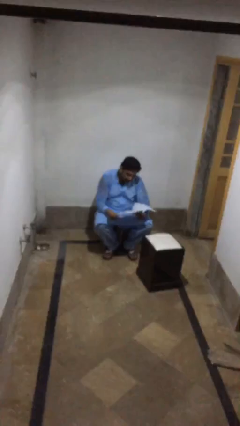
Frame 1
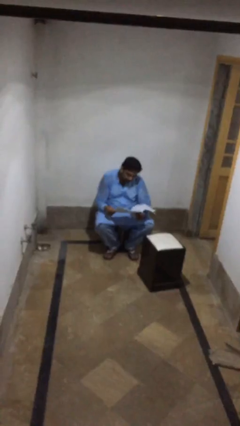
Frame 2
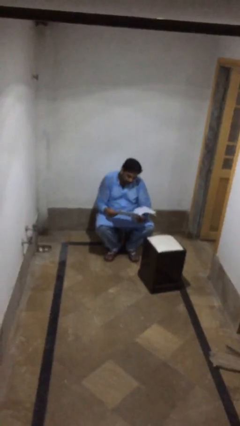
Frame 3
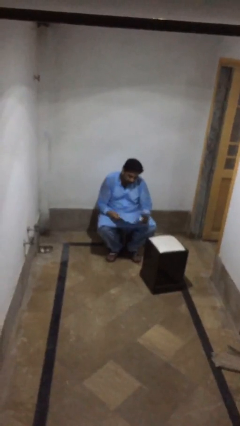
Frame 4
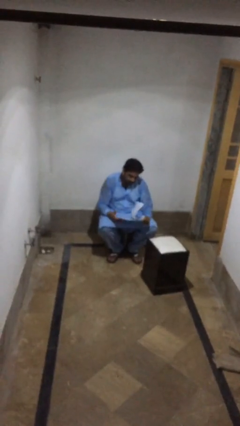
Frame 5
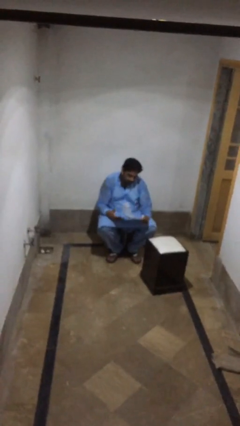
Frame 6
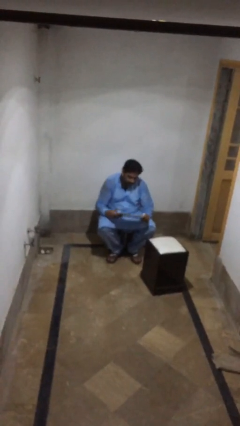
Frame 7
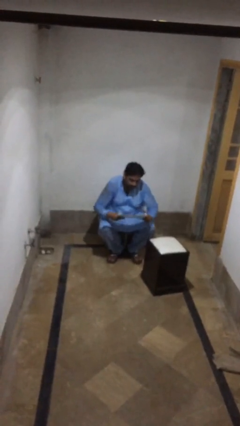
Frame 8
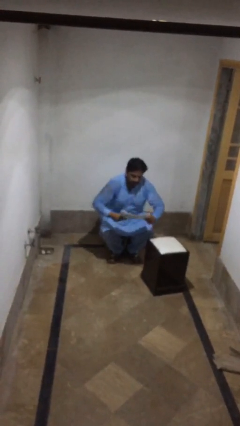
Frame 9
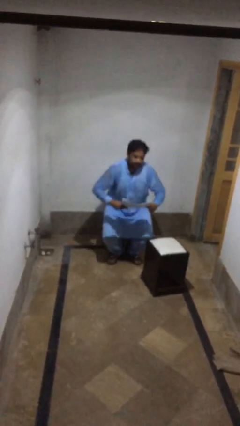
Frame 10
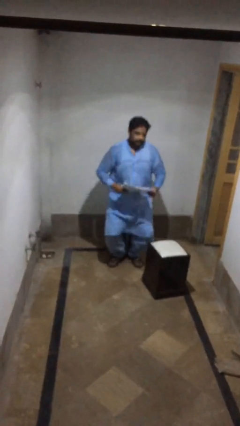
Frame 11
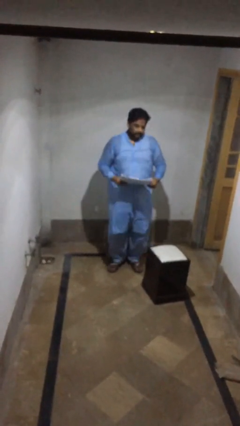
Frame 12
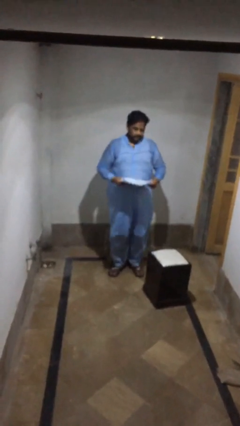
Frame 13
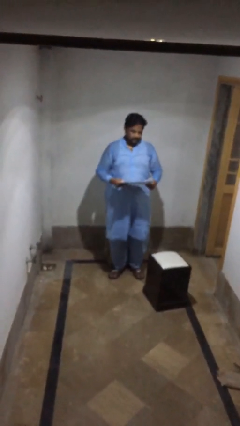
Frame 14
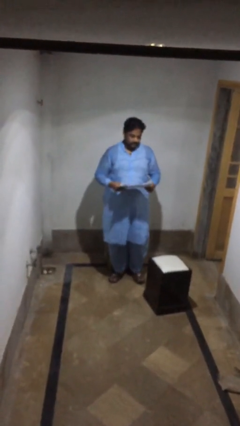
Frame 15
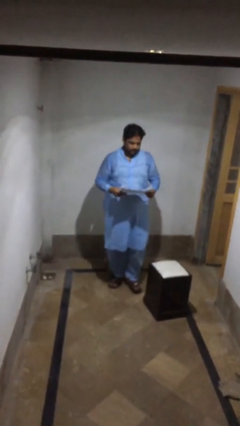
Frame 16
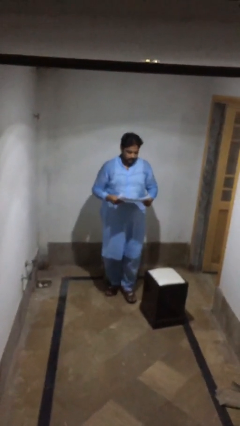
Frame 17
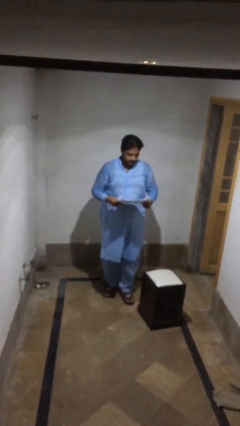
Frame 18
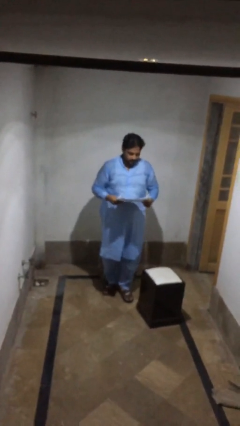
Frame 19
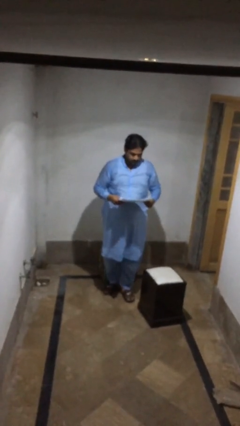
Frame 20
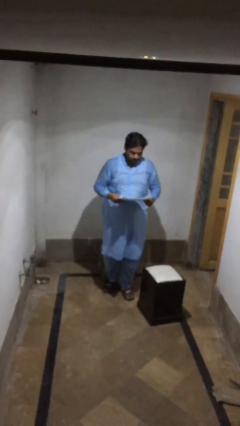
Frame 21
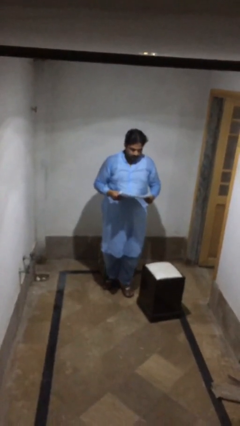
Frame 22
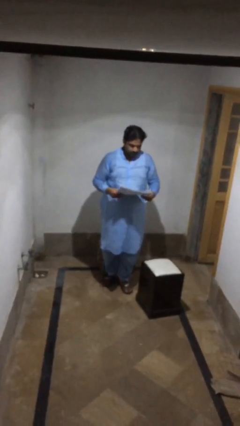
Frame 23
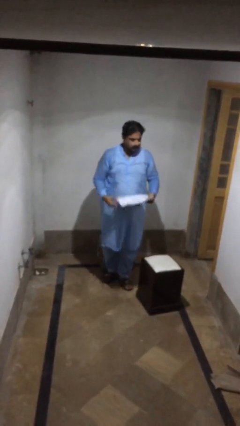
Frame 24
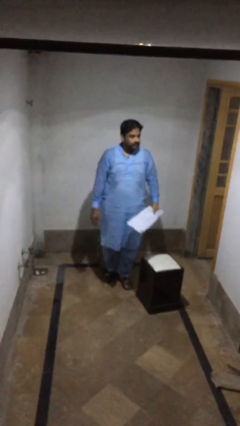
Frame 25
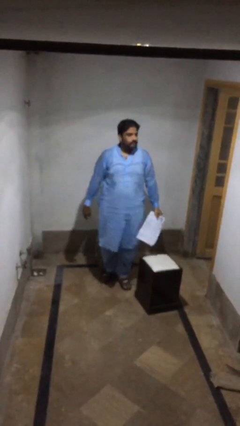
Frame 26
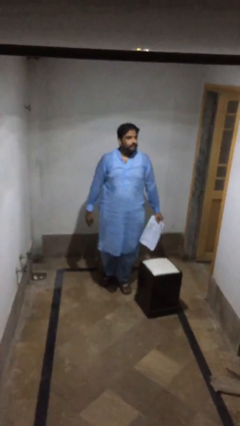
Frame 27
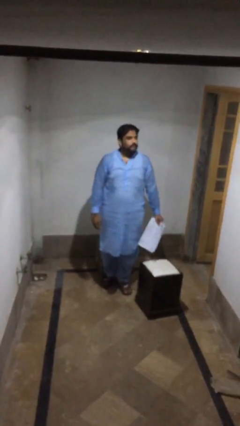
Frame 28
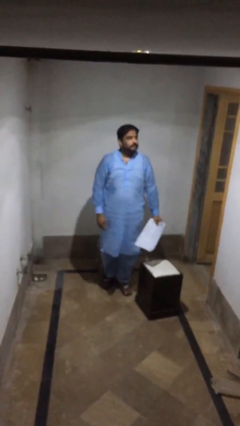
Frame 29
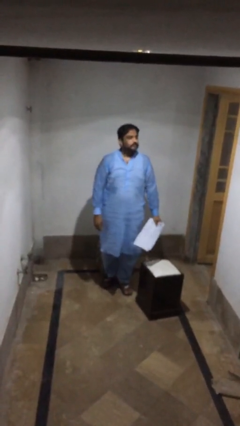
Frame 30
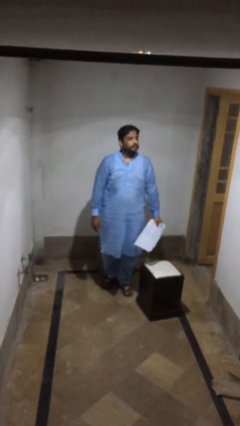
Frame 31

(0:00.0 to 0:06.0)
person stands up

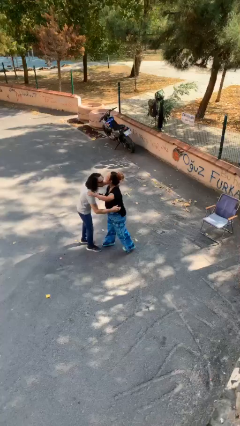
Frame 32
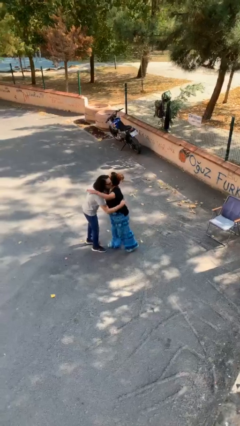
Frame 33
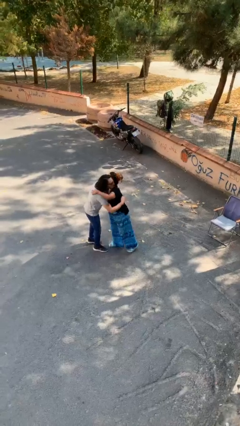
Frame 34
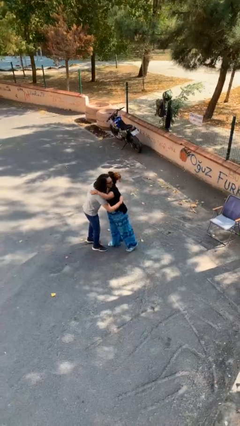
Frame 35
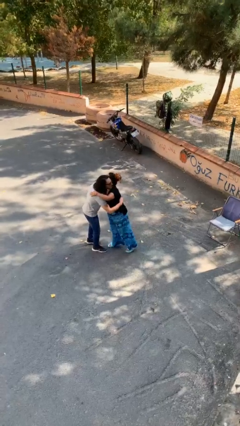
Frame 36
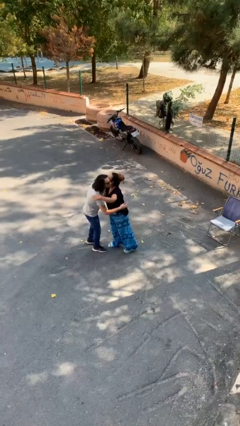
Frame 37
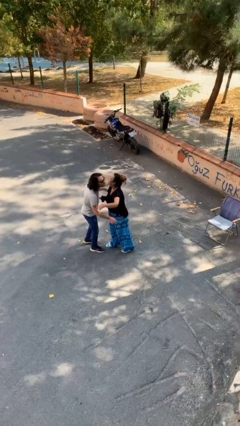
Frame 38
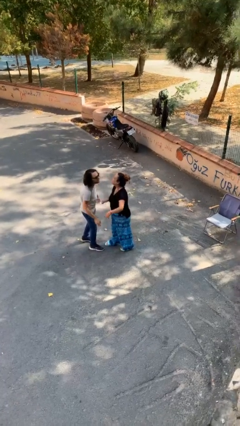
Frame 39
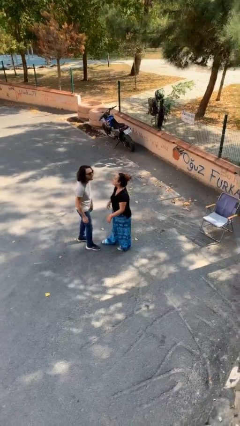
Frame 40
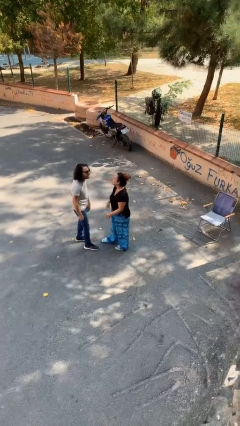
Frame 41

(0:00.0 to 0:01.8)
person embraces person

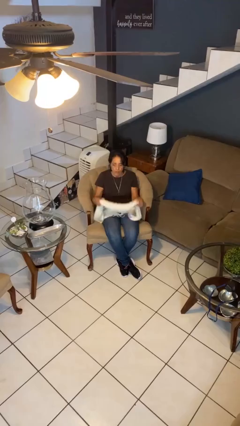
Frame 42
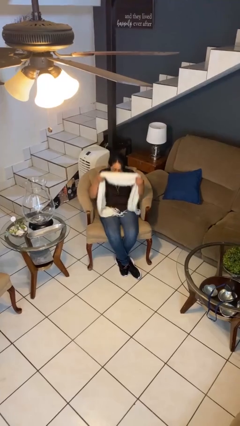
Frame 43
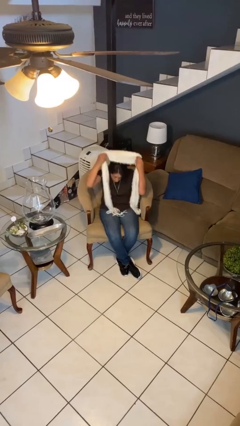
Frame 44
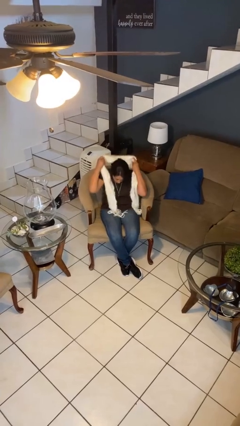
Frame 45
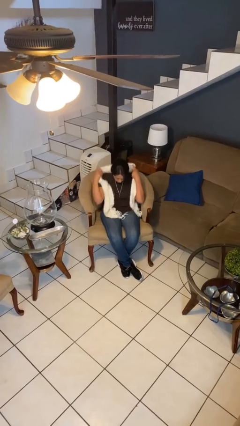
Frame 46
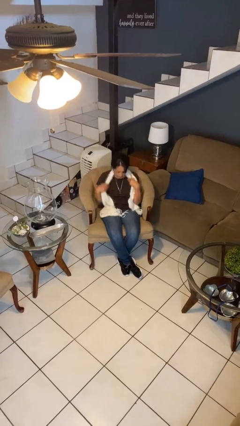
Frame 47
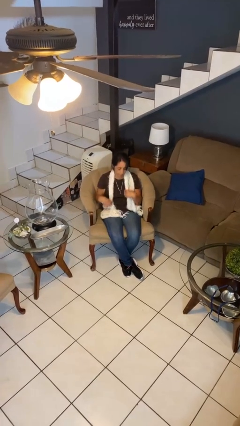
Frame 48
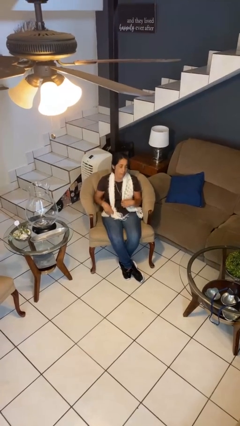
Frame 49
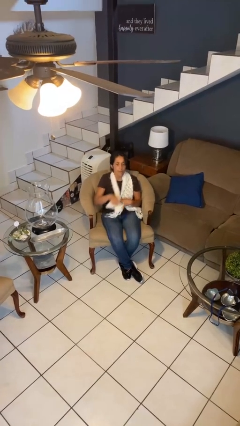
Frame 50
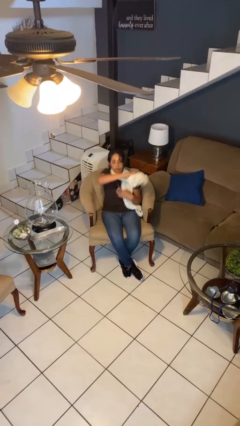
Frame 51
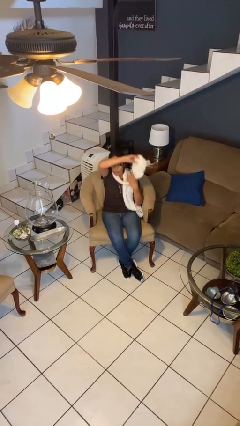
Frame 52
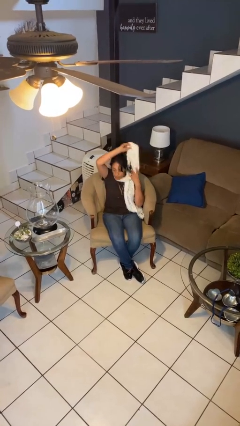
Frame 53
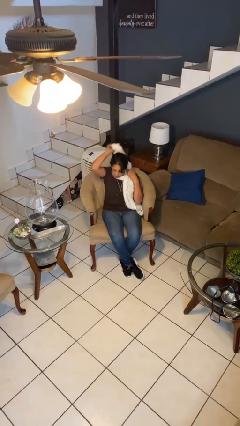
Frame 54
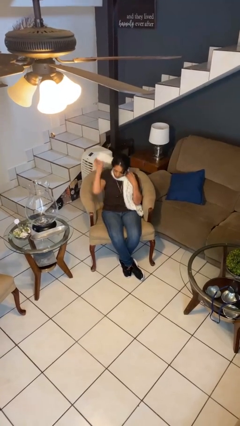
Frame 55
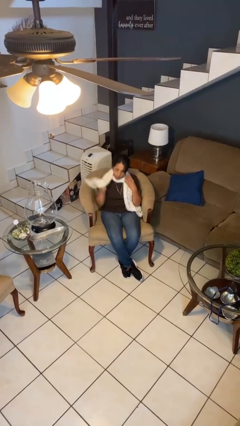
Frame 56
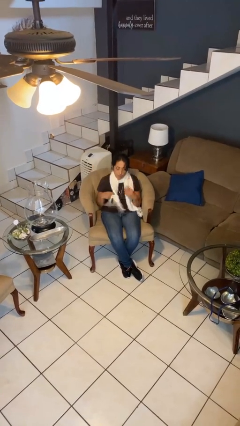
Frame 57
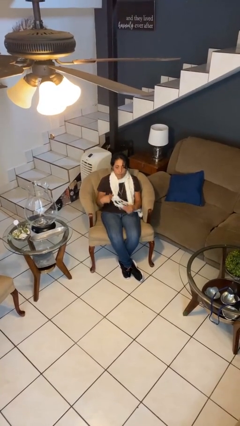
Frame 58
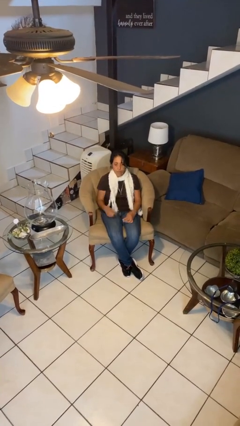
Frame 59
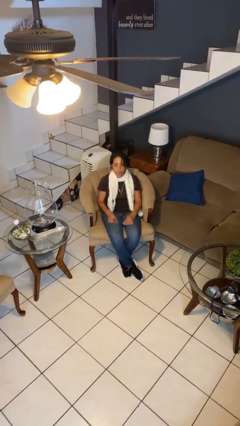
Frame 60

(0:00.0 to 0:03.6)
person puts on scarf

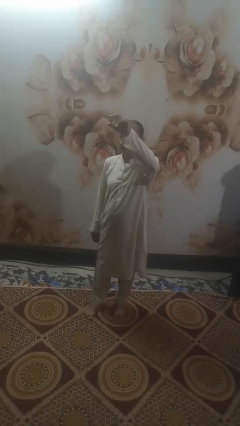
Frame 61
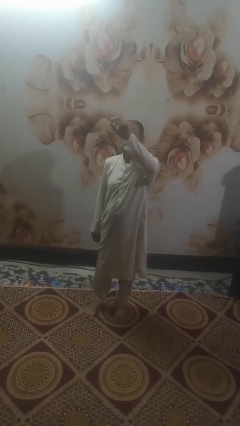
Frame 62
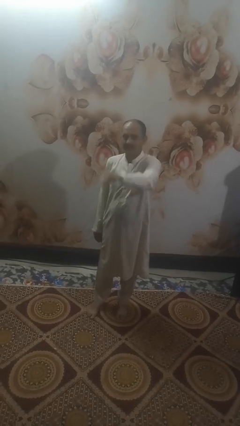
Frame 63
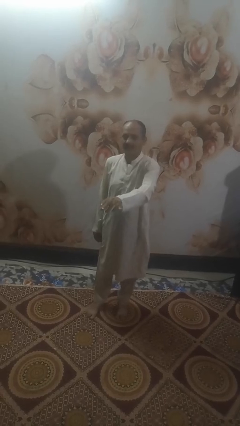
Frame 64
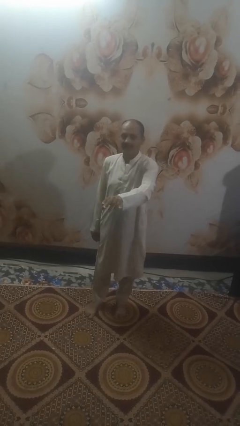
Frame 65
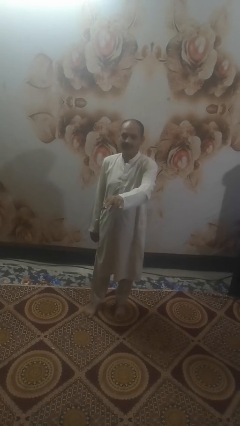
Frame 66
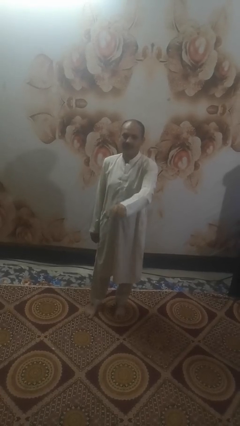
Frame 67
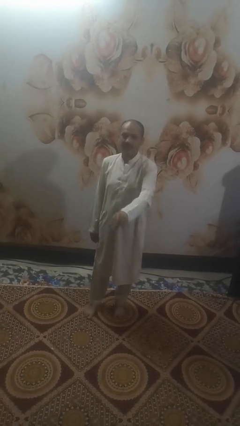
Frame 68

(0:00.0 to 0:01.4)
person gestures swipe down

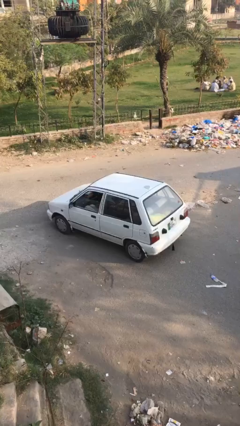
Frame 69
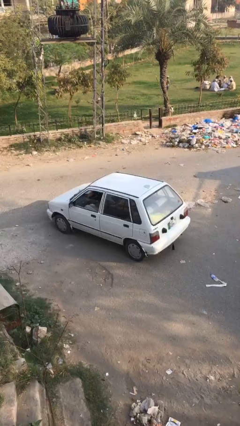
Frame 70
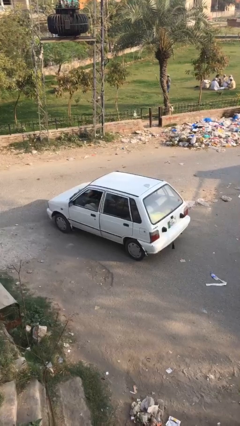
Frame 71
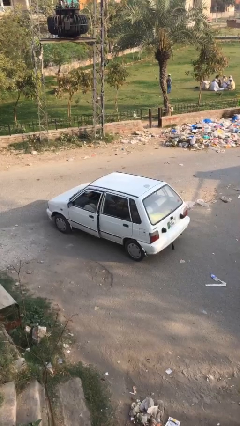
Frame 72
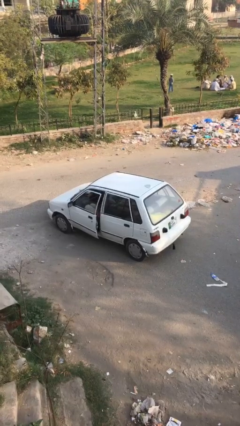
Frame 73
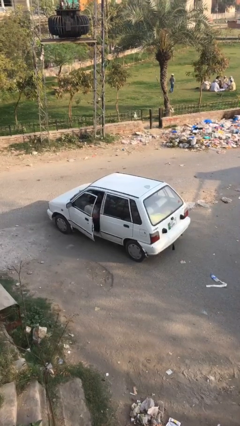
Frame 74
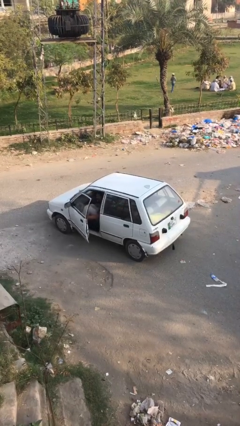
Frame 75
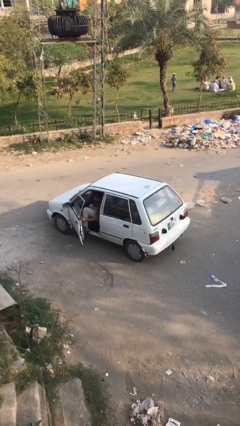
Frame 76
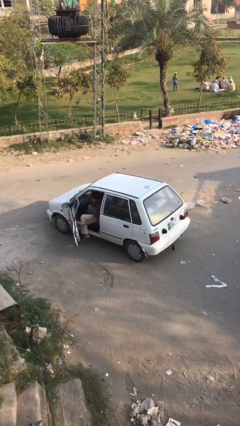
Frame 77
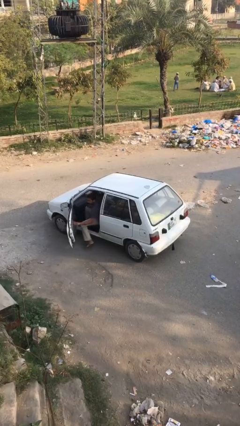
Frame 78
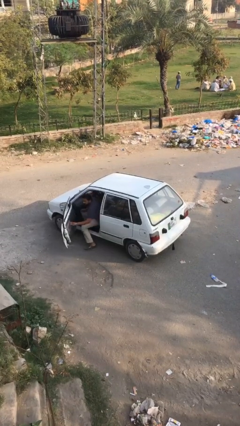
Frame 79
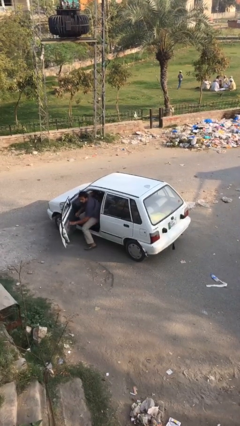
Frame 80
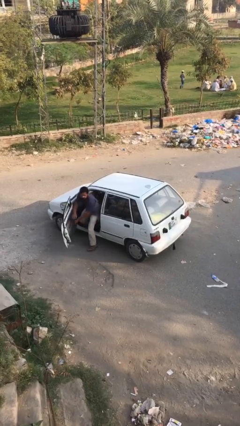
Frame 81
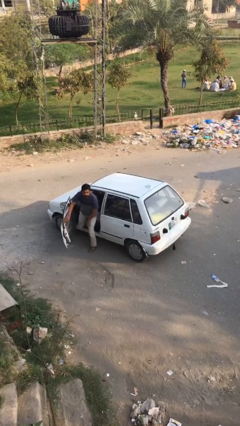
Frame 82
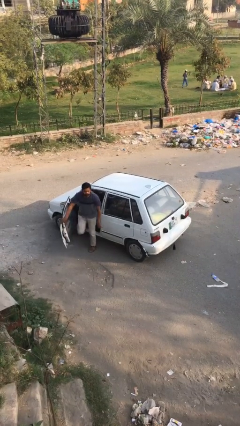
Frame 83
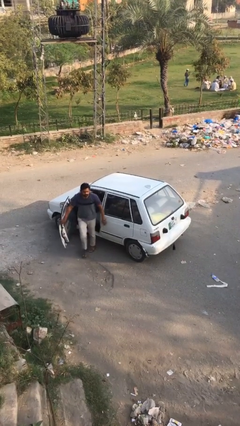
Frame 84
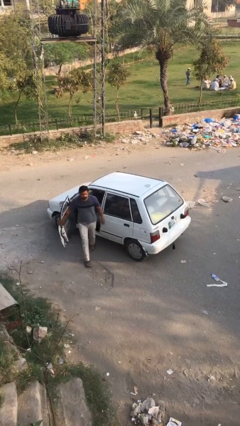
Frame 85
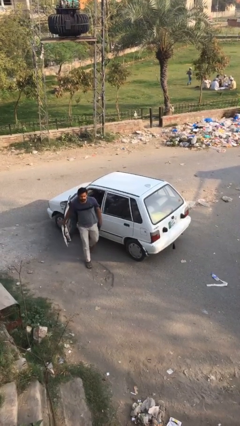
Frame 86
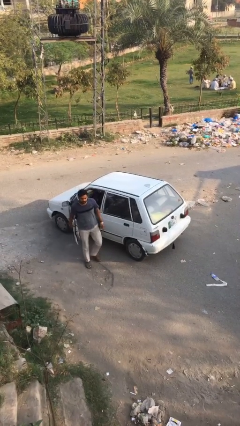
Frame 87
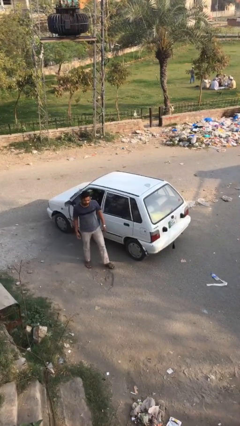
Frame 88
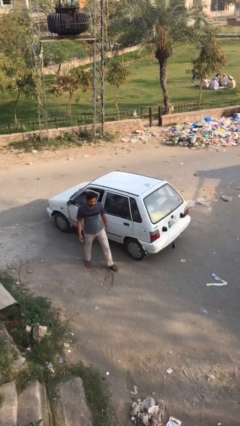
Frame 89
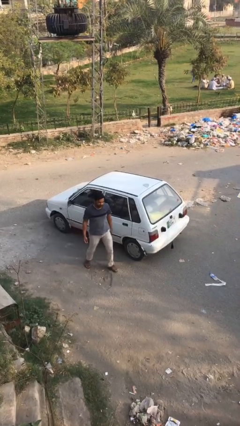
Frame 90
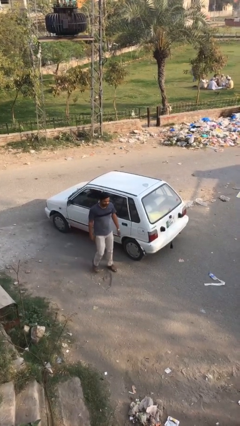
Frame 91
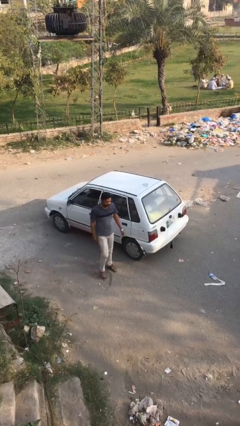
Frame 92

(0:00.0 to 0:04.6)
car drops off person

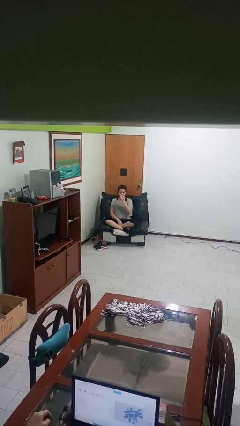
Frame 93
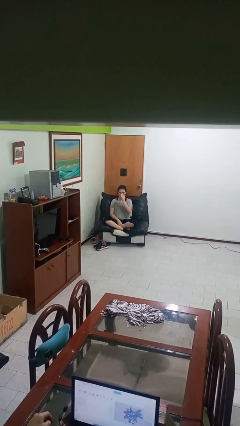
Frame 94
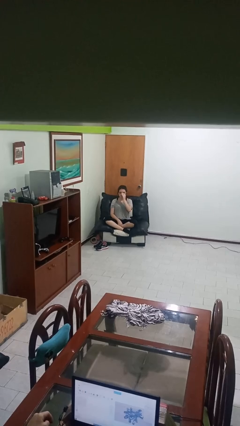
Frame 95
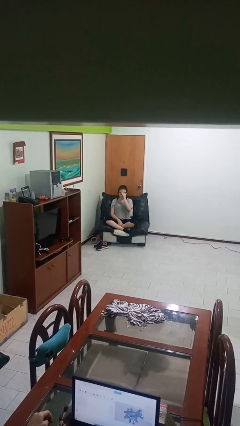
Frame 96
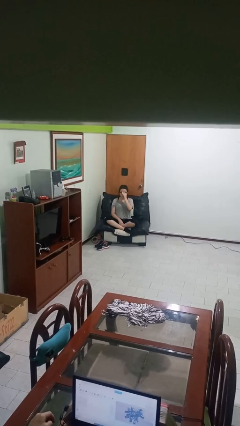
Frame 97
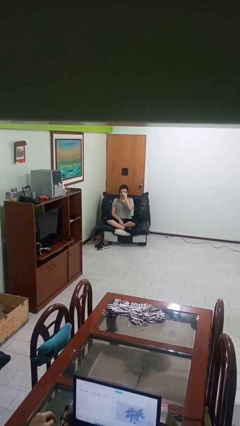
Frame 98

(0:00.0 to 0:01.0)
person puts on glasses
